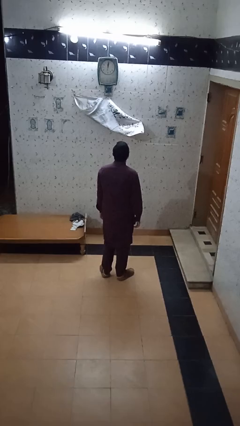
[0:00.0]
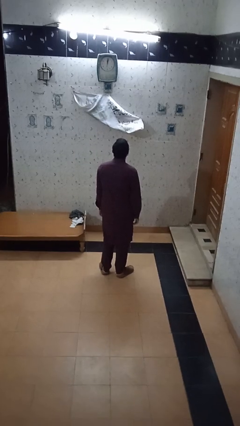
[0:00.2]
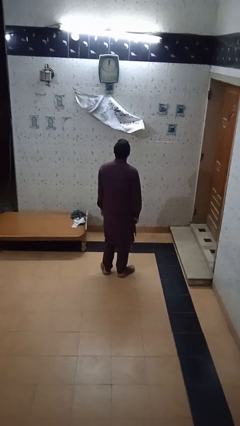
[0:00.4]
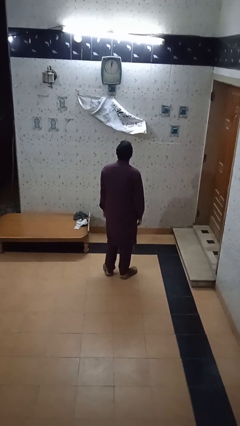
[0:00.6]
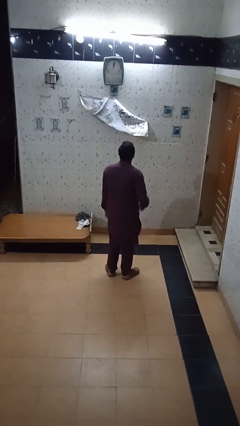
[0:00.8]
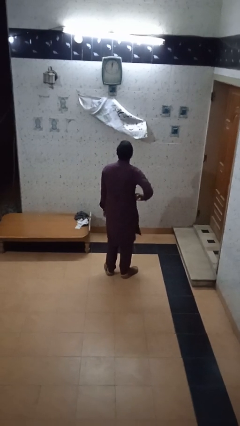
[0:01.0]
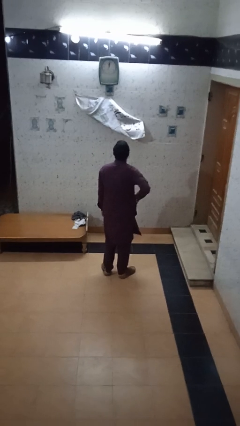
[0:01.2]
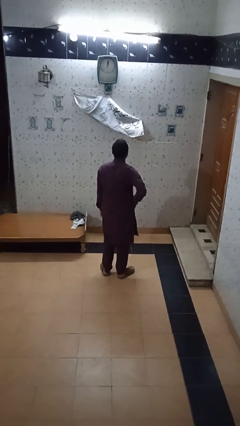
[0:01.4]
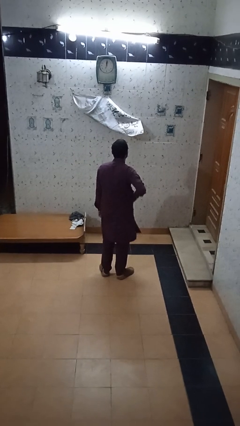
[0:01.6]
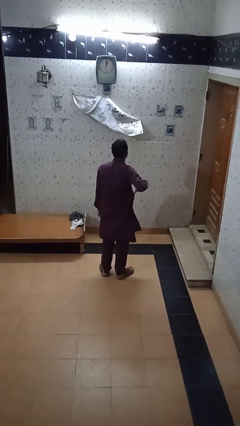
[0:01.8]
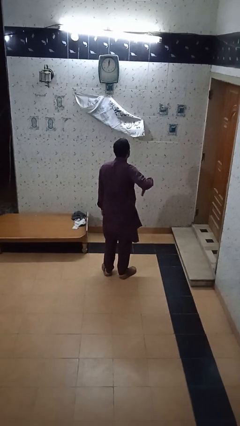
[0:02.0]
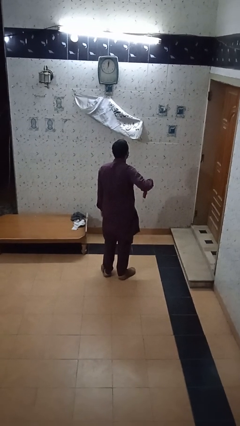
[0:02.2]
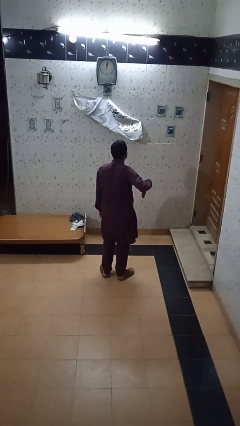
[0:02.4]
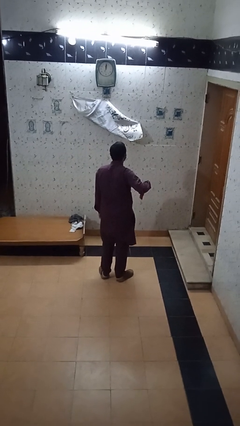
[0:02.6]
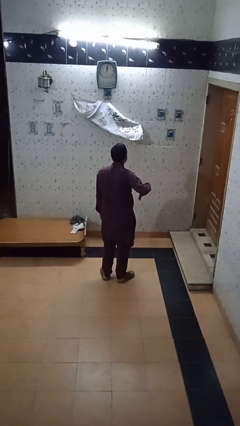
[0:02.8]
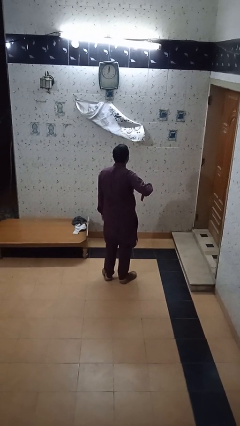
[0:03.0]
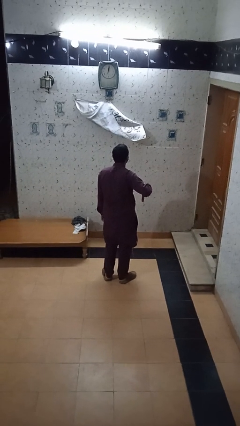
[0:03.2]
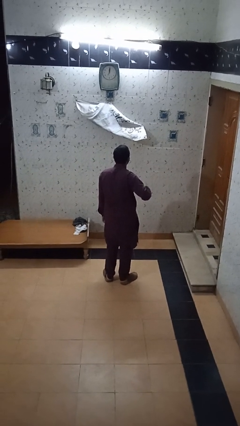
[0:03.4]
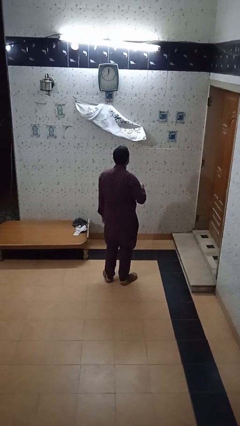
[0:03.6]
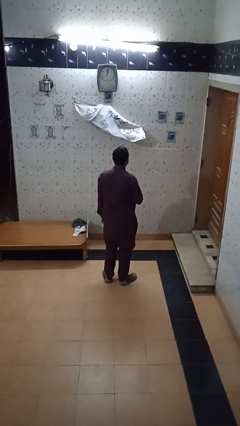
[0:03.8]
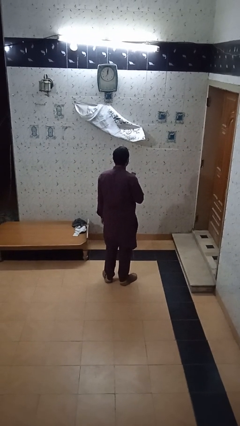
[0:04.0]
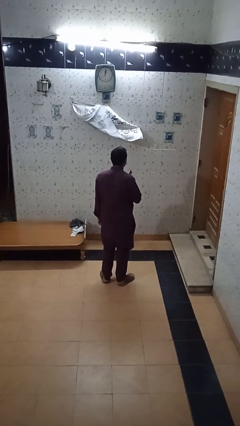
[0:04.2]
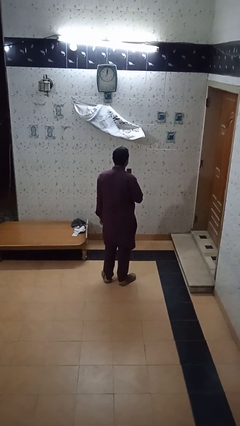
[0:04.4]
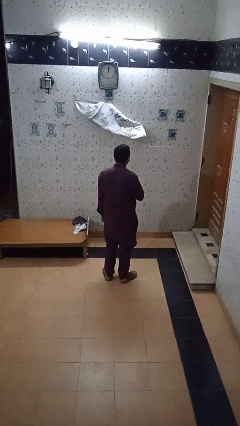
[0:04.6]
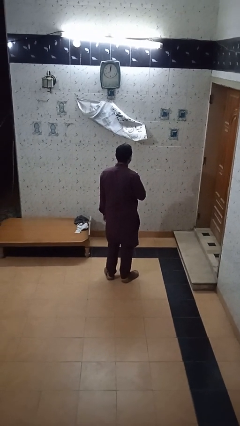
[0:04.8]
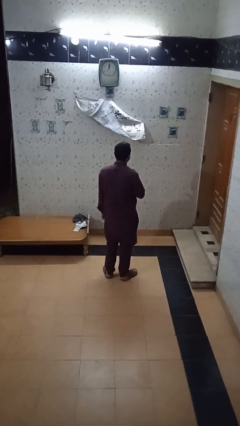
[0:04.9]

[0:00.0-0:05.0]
person takes phone from pocket

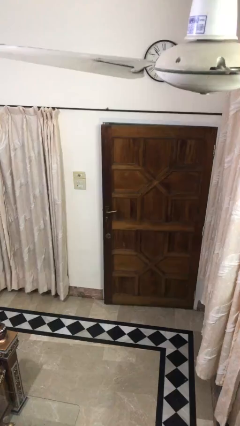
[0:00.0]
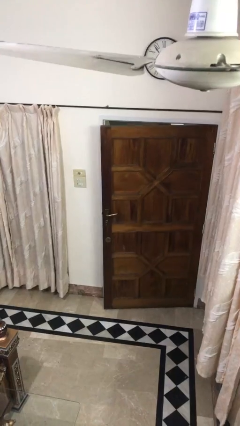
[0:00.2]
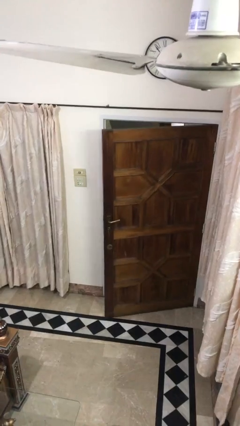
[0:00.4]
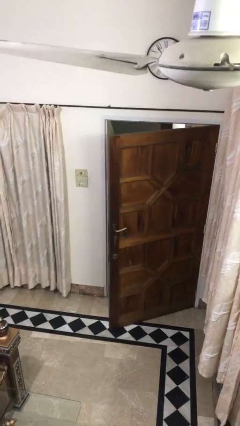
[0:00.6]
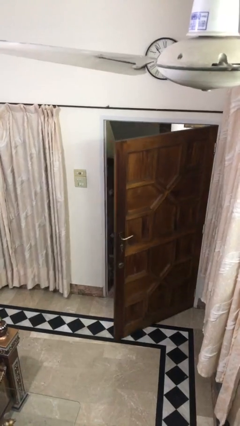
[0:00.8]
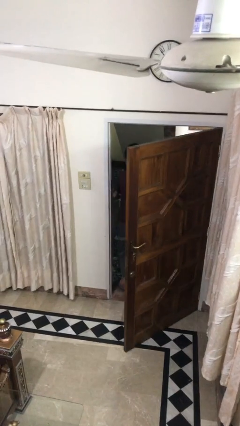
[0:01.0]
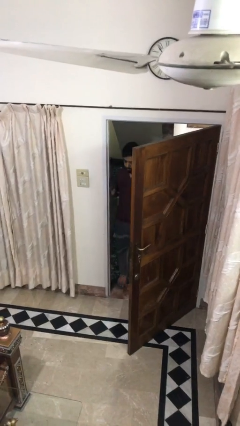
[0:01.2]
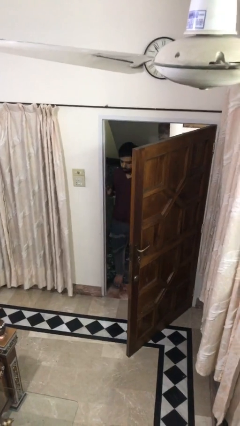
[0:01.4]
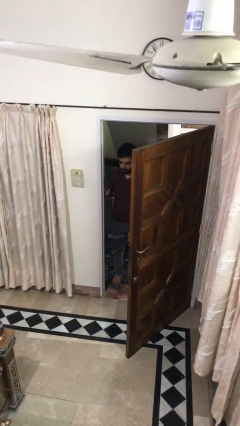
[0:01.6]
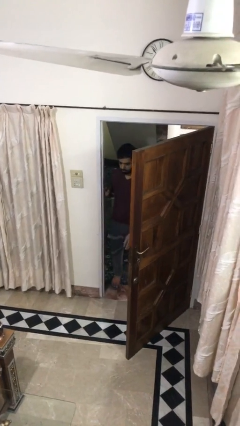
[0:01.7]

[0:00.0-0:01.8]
person opens facility door

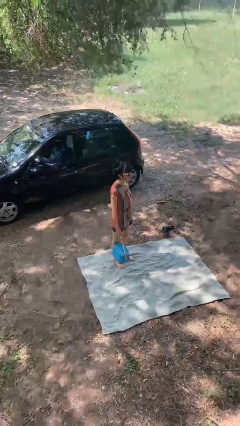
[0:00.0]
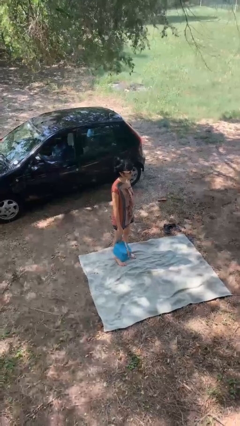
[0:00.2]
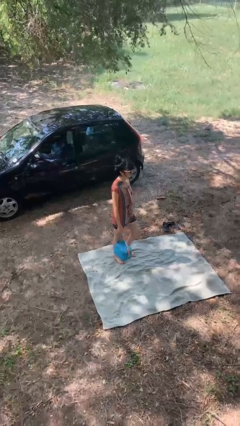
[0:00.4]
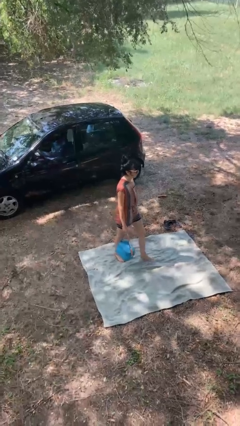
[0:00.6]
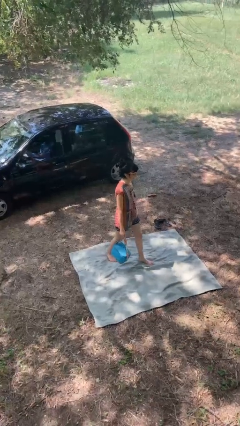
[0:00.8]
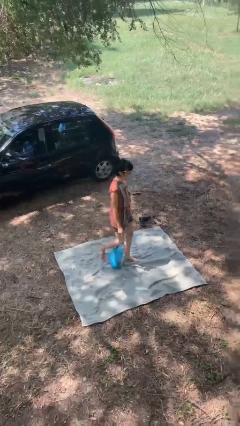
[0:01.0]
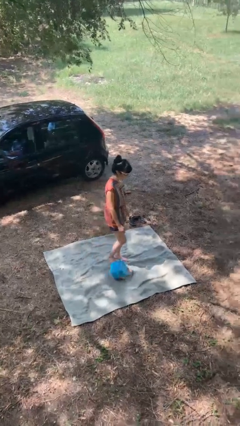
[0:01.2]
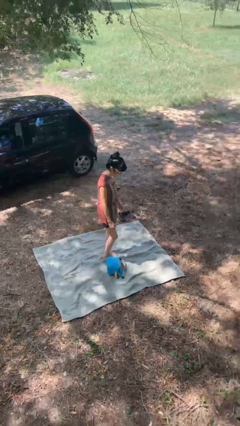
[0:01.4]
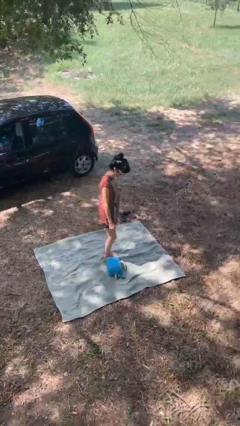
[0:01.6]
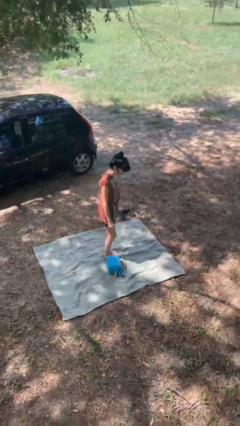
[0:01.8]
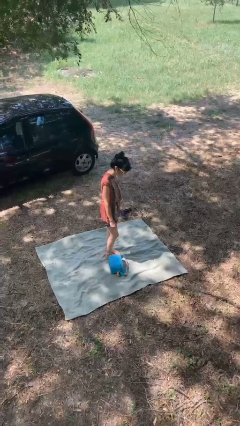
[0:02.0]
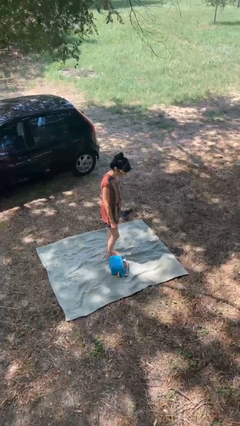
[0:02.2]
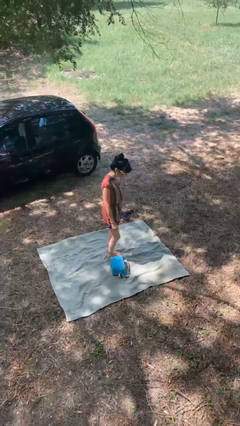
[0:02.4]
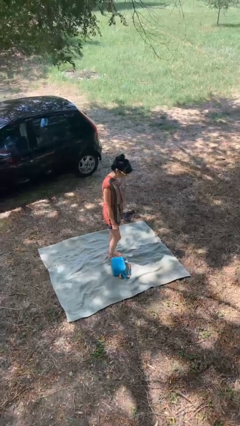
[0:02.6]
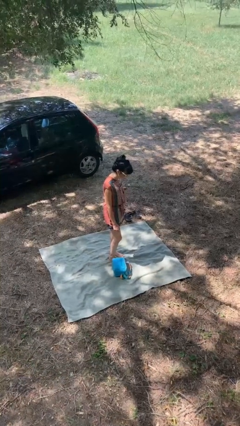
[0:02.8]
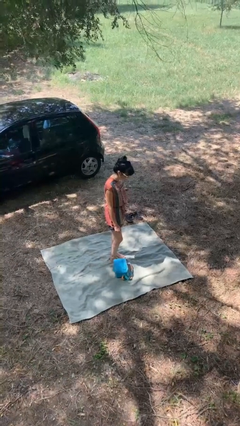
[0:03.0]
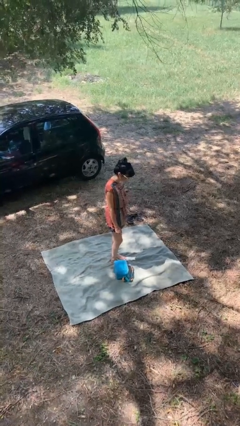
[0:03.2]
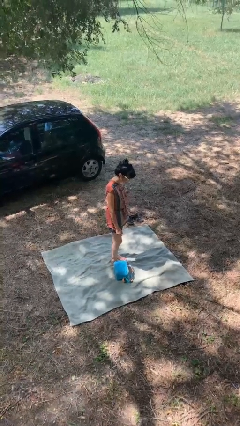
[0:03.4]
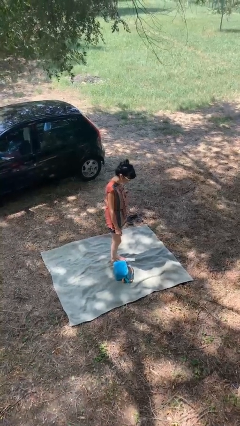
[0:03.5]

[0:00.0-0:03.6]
person drops object

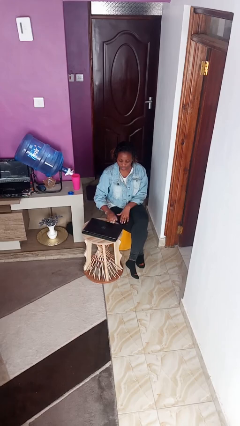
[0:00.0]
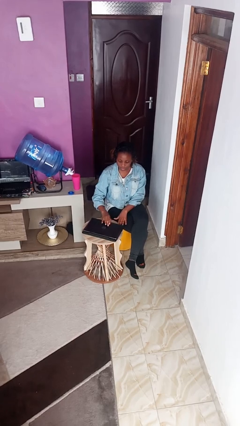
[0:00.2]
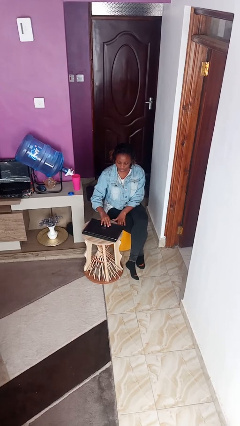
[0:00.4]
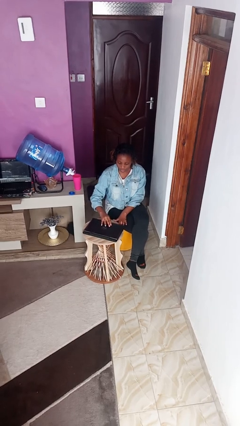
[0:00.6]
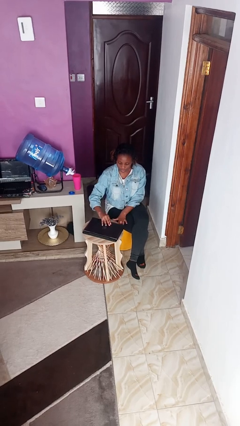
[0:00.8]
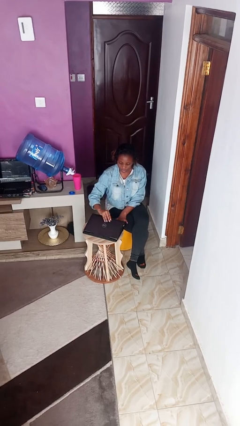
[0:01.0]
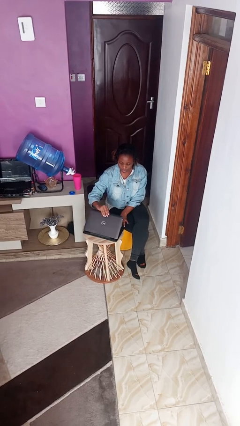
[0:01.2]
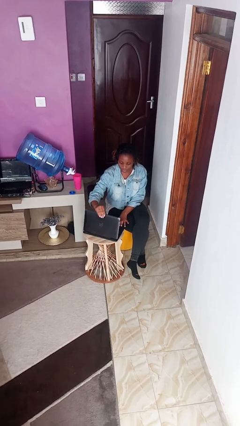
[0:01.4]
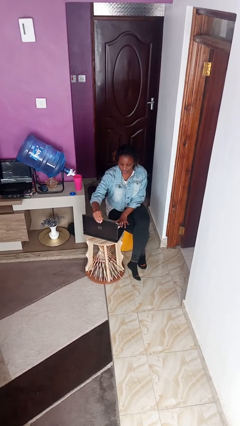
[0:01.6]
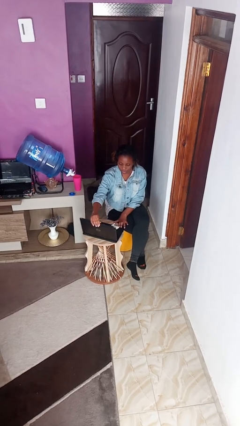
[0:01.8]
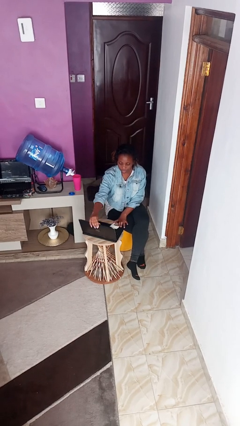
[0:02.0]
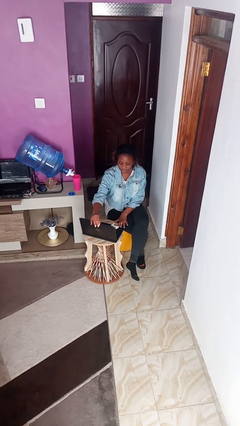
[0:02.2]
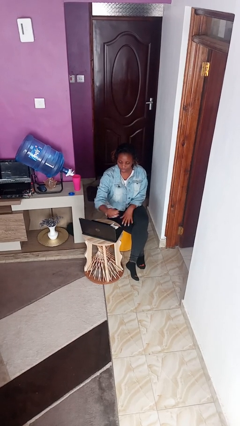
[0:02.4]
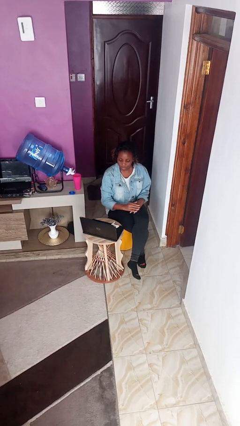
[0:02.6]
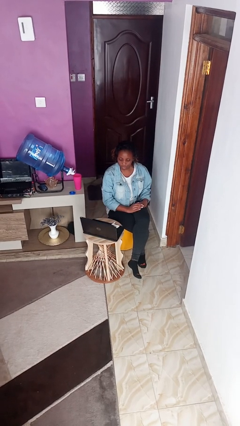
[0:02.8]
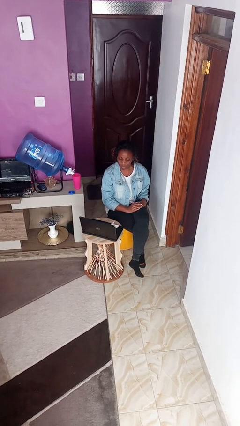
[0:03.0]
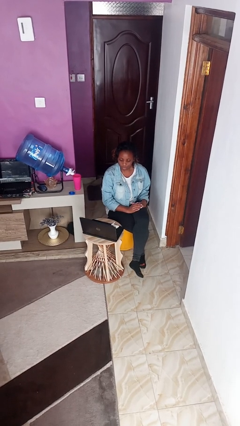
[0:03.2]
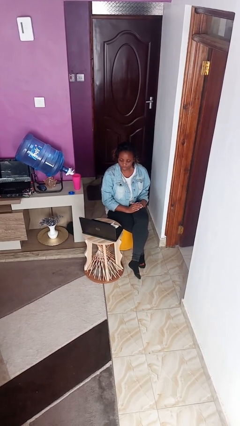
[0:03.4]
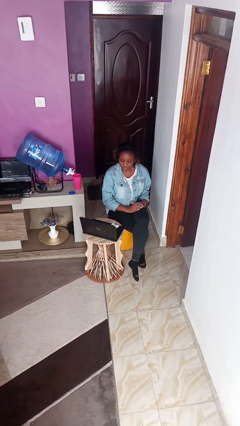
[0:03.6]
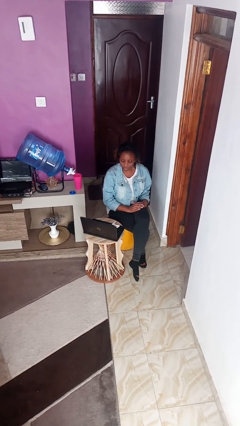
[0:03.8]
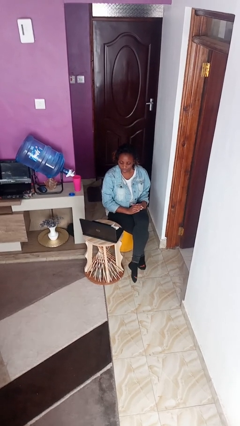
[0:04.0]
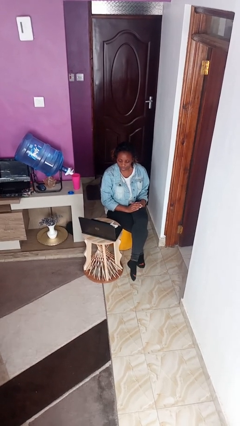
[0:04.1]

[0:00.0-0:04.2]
person opens laptop

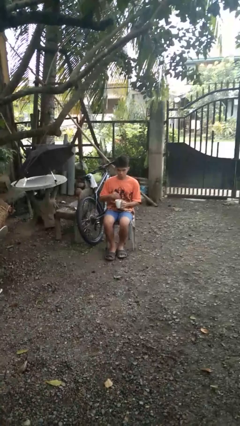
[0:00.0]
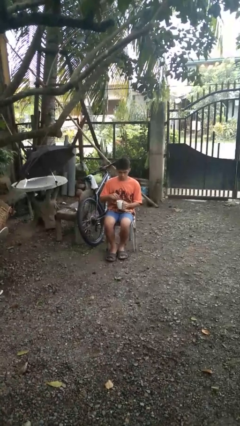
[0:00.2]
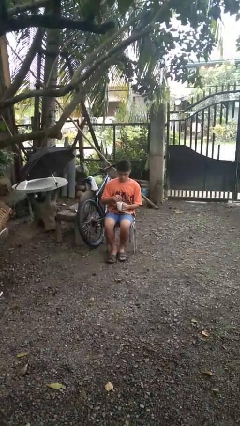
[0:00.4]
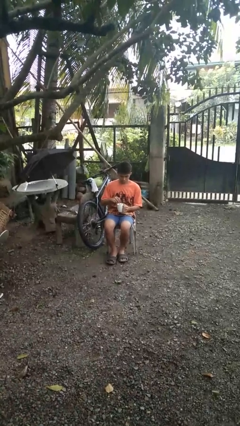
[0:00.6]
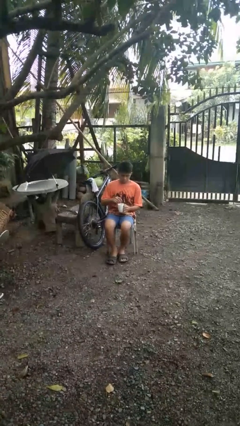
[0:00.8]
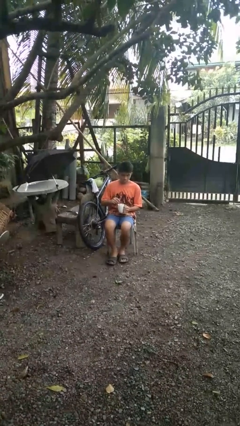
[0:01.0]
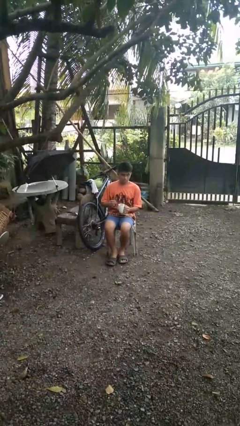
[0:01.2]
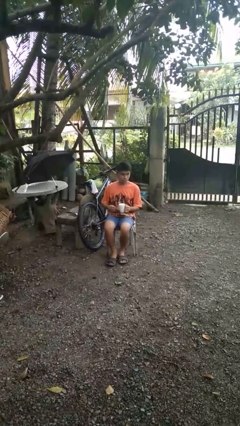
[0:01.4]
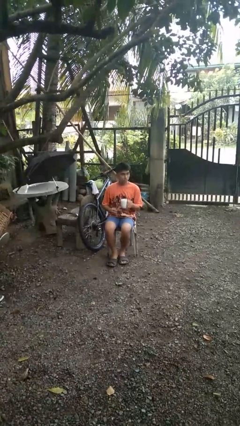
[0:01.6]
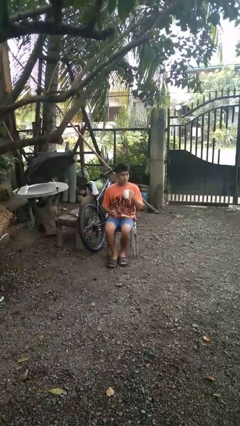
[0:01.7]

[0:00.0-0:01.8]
person stirs mug

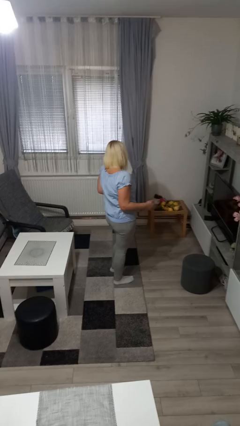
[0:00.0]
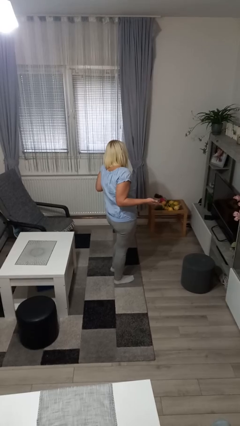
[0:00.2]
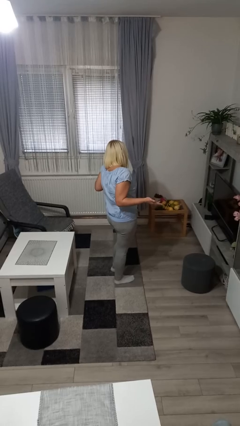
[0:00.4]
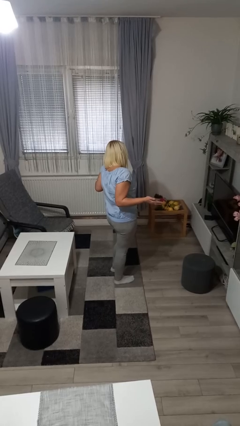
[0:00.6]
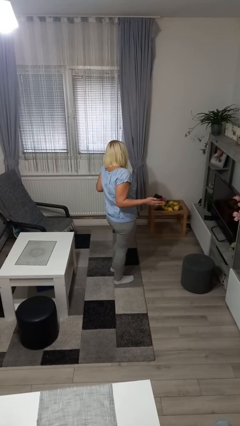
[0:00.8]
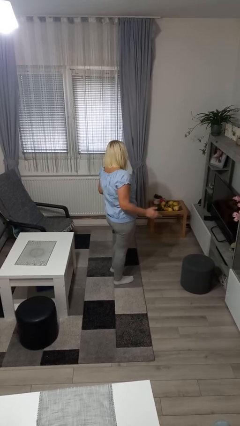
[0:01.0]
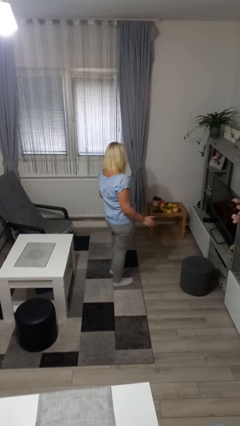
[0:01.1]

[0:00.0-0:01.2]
person shrugs
